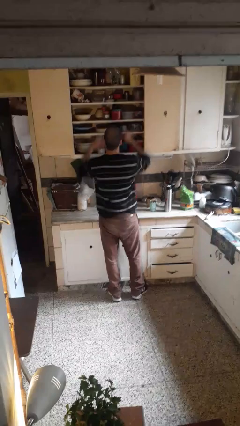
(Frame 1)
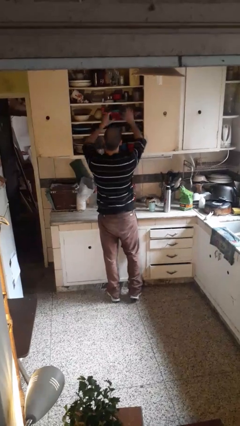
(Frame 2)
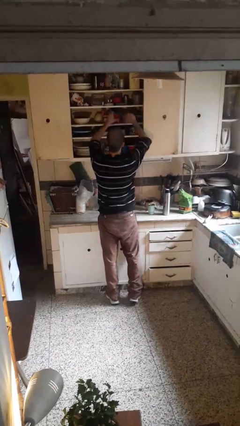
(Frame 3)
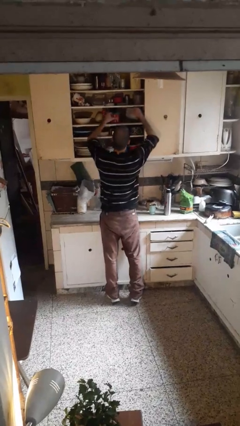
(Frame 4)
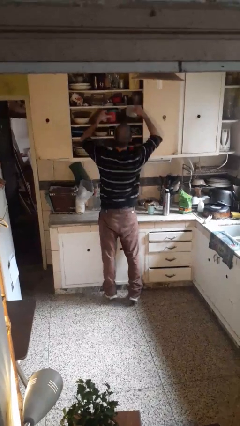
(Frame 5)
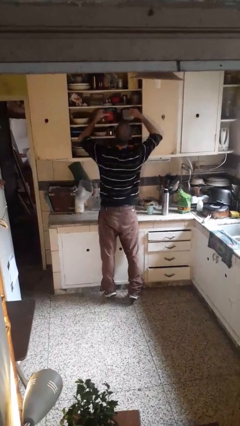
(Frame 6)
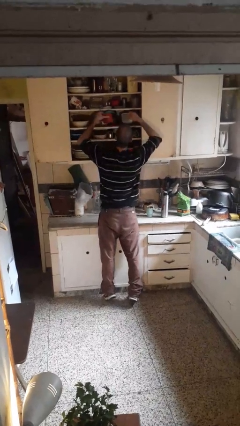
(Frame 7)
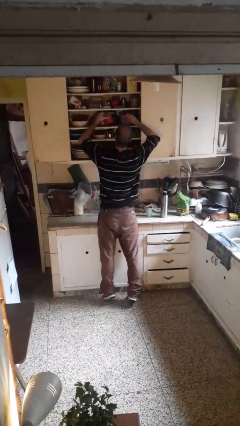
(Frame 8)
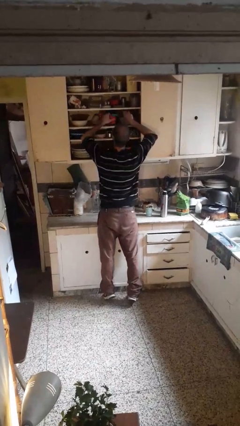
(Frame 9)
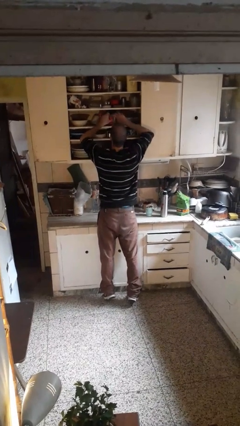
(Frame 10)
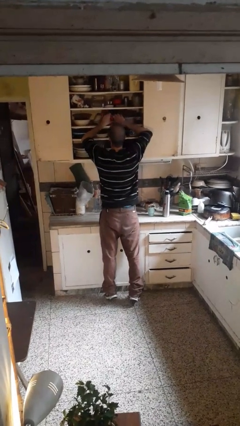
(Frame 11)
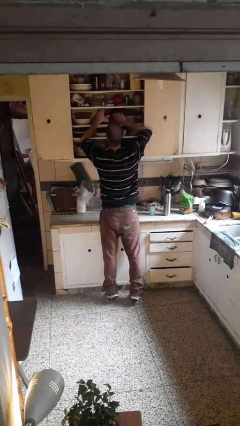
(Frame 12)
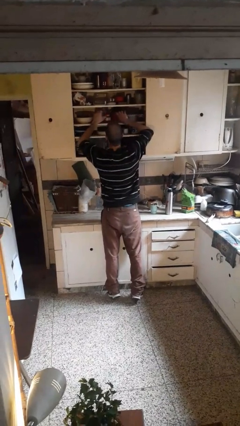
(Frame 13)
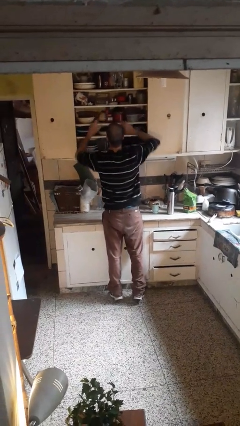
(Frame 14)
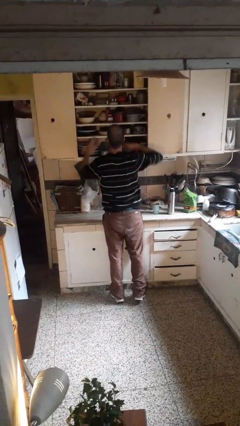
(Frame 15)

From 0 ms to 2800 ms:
person searches in cabinet

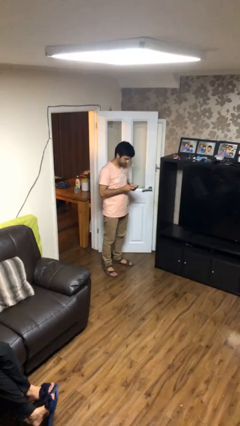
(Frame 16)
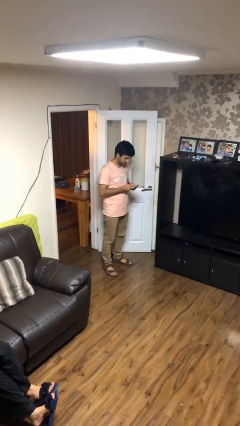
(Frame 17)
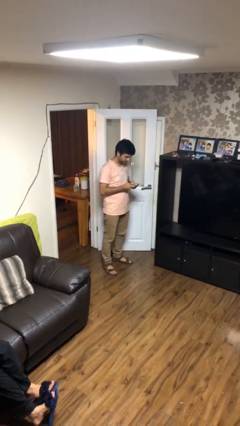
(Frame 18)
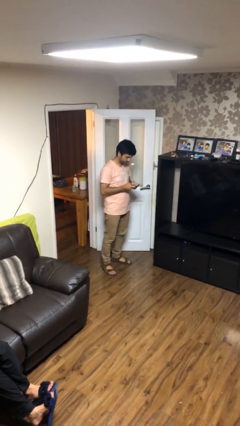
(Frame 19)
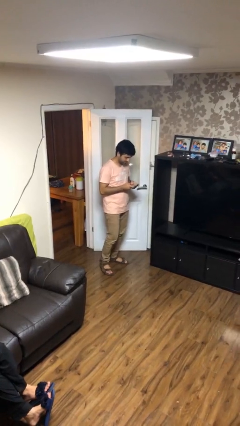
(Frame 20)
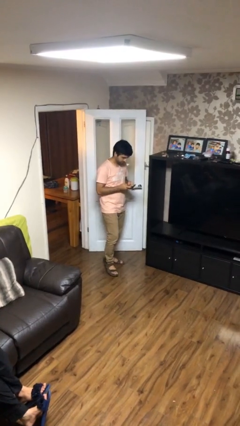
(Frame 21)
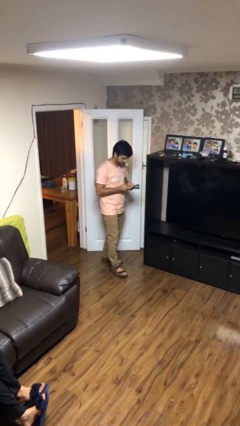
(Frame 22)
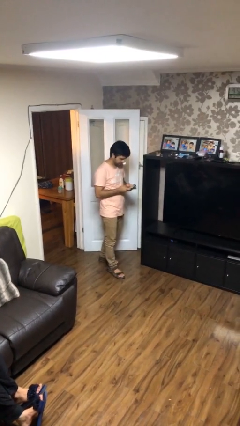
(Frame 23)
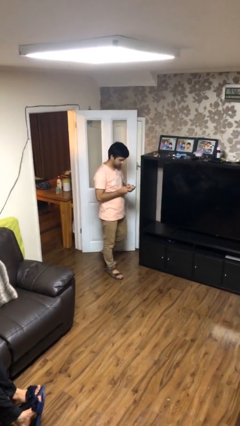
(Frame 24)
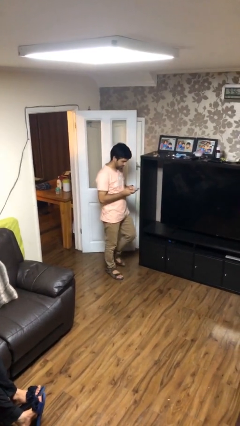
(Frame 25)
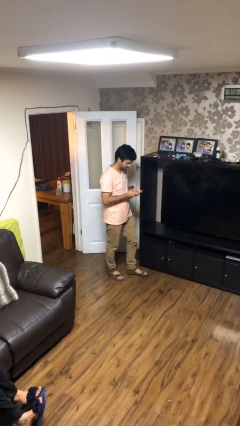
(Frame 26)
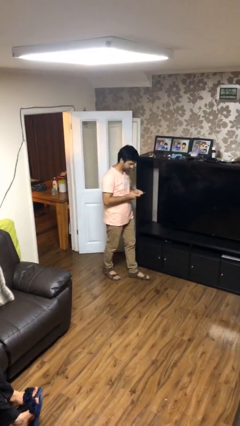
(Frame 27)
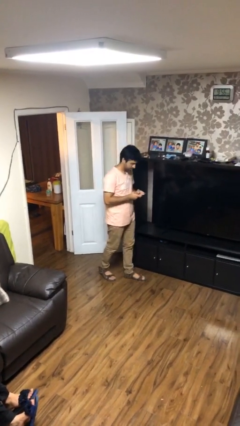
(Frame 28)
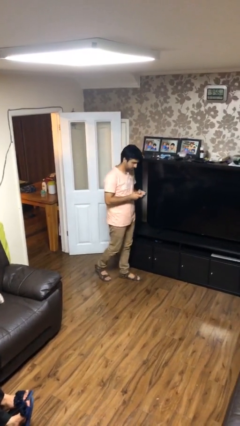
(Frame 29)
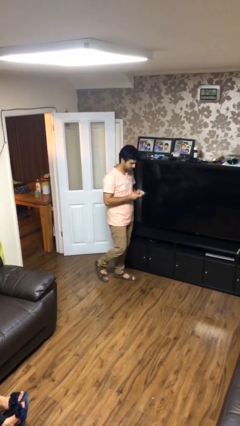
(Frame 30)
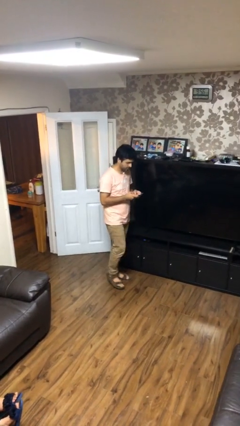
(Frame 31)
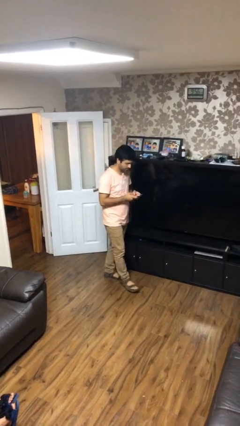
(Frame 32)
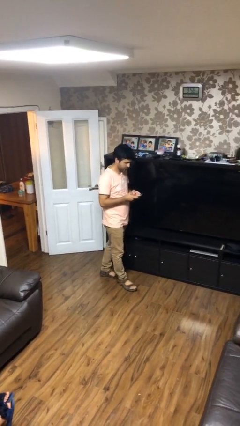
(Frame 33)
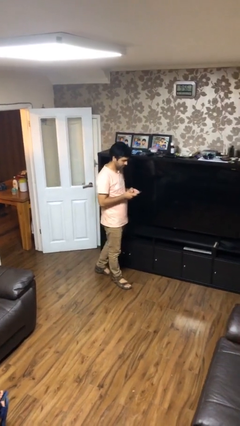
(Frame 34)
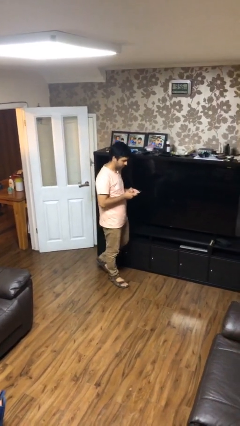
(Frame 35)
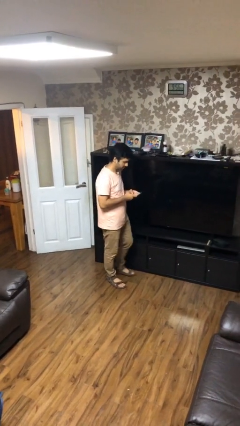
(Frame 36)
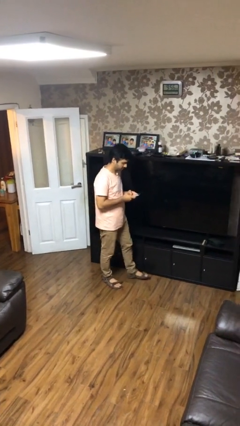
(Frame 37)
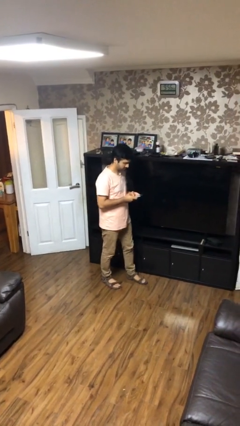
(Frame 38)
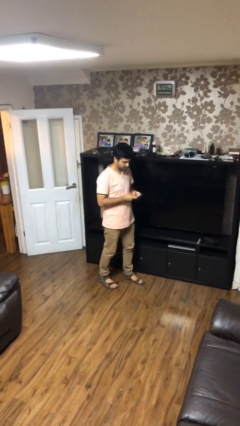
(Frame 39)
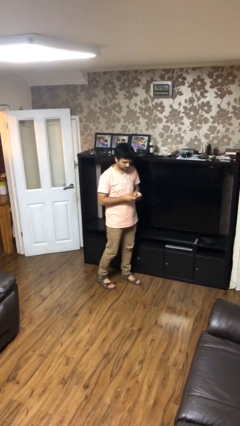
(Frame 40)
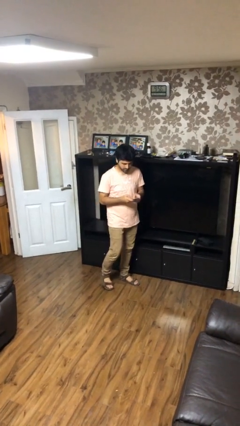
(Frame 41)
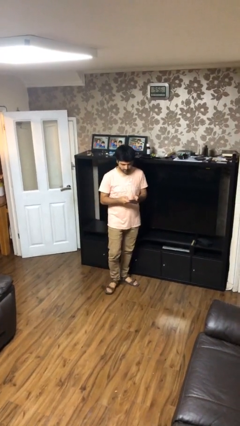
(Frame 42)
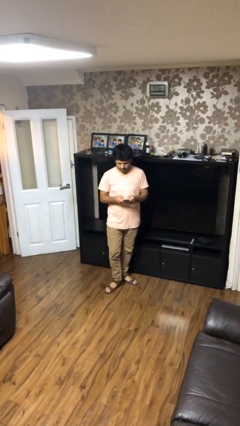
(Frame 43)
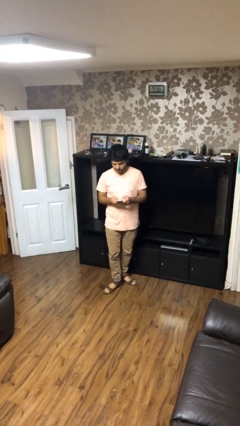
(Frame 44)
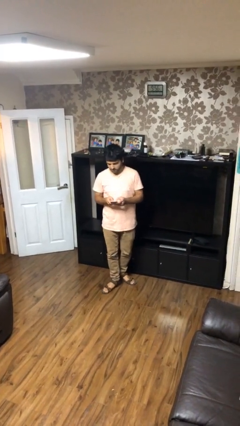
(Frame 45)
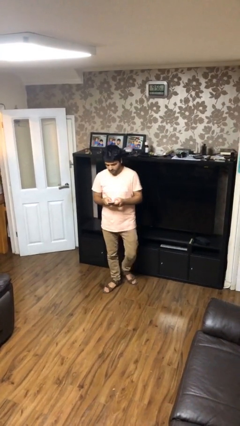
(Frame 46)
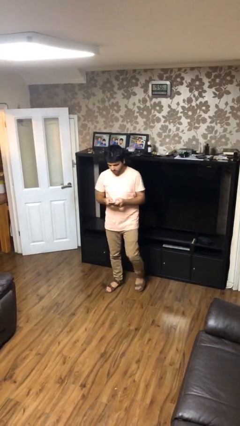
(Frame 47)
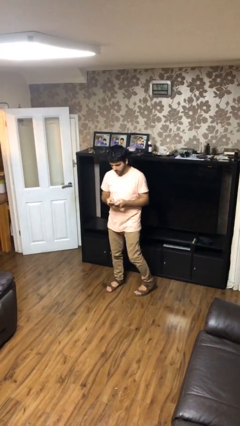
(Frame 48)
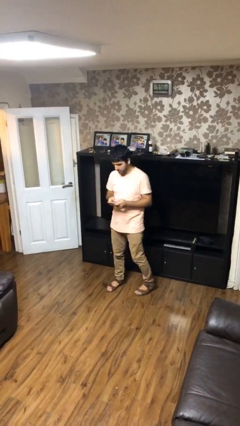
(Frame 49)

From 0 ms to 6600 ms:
person texts on phone

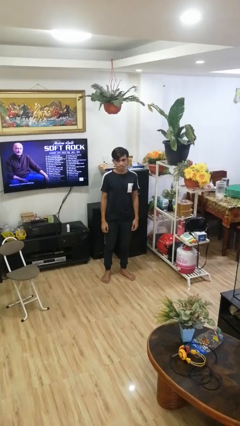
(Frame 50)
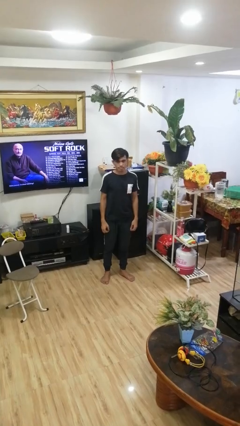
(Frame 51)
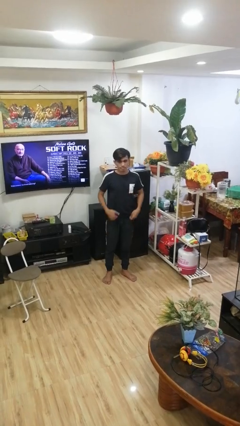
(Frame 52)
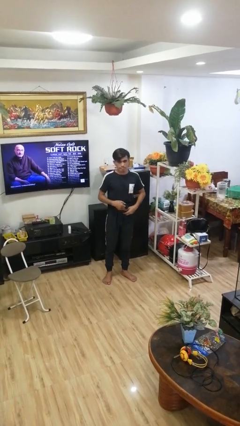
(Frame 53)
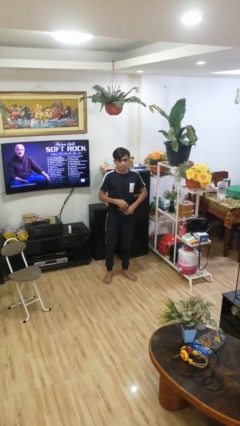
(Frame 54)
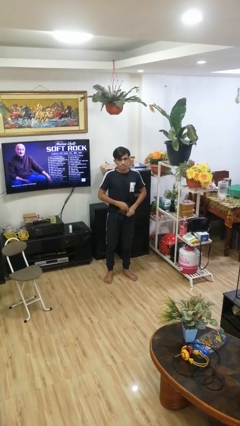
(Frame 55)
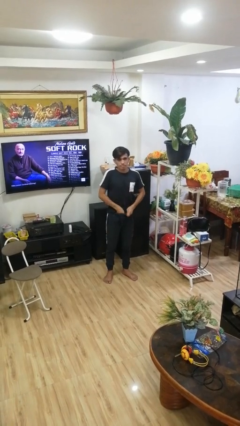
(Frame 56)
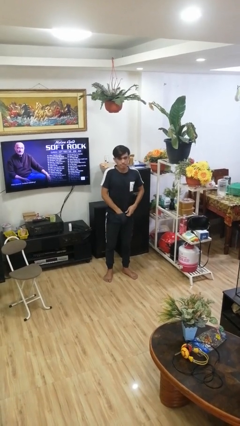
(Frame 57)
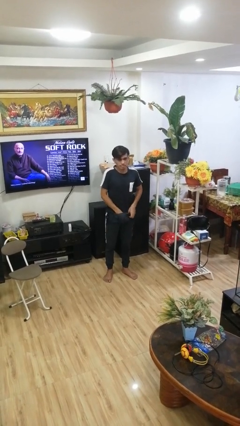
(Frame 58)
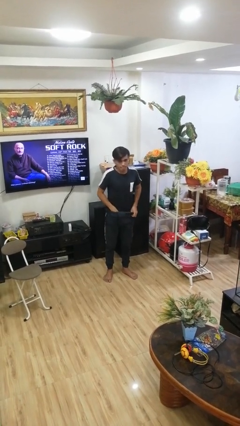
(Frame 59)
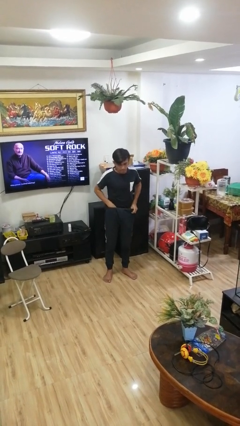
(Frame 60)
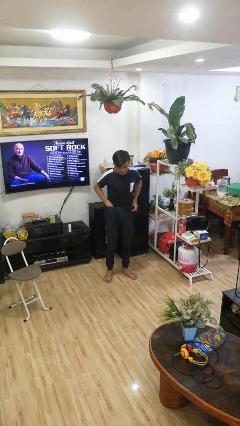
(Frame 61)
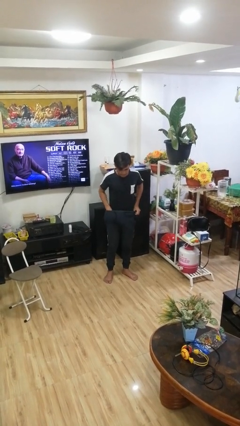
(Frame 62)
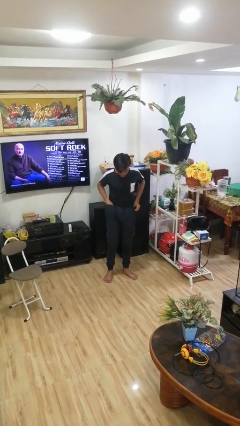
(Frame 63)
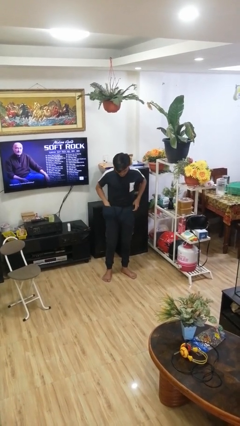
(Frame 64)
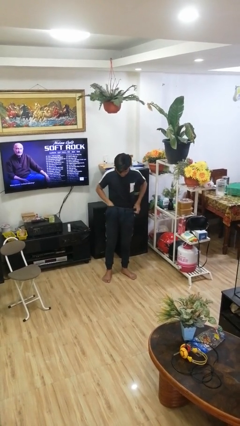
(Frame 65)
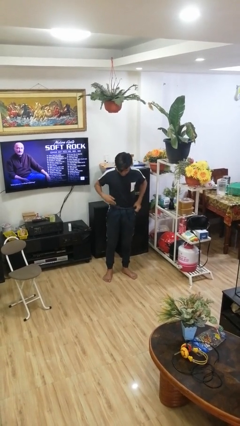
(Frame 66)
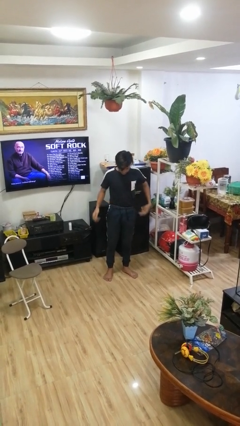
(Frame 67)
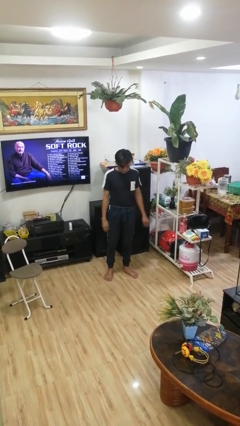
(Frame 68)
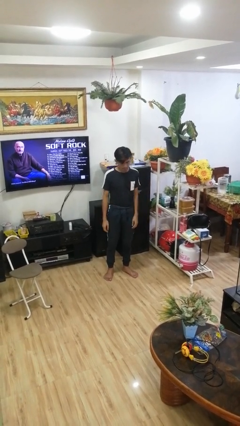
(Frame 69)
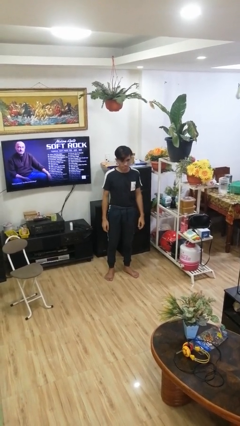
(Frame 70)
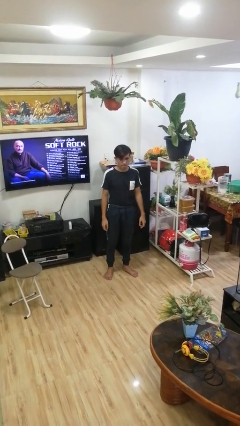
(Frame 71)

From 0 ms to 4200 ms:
person tucks in shirt

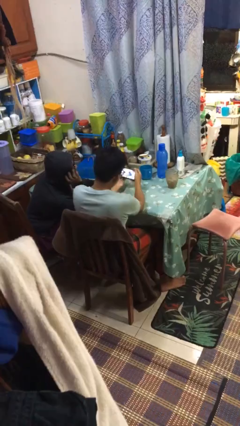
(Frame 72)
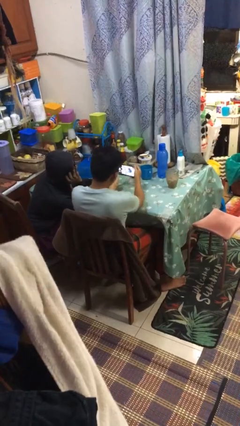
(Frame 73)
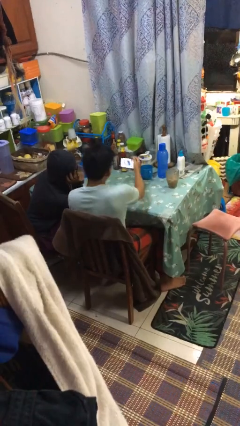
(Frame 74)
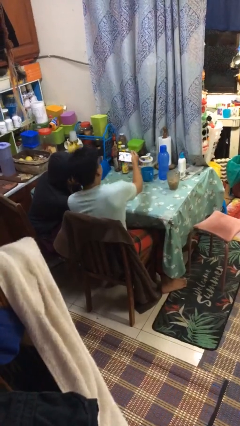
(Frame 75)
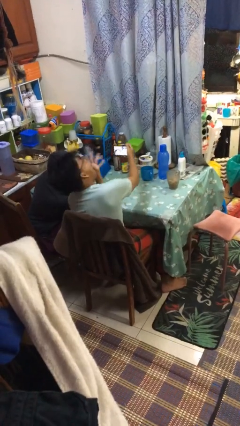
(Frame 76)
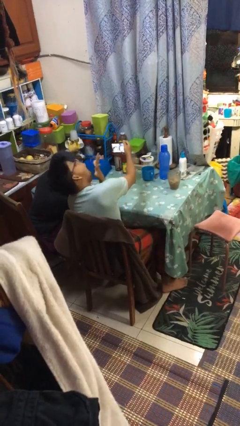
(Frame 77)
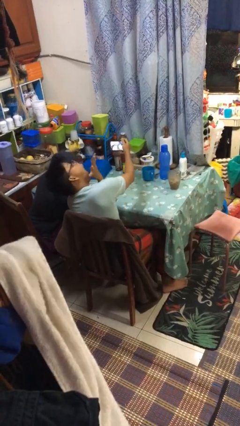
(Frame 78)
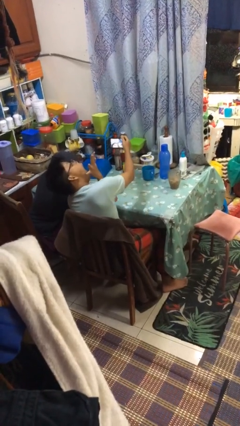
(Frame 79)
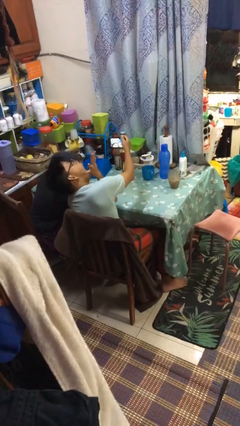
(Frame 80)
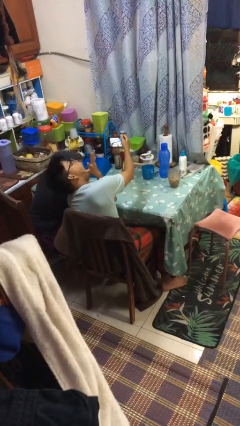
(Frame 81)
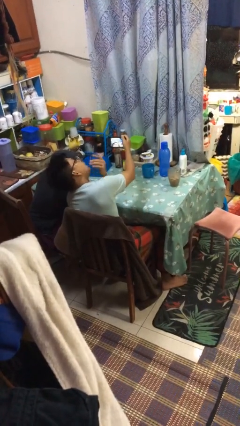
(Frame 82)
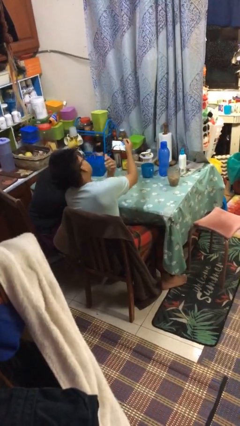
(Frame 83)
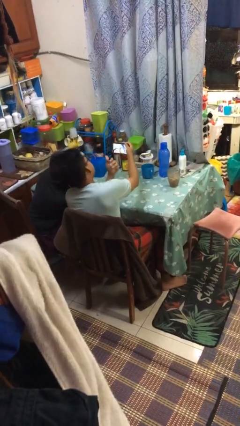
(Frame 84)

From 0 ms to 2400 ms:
person takes selfie with person

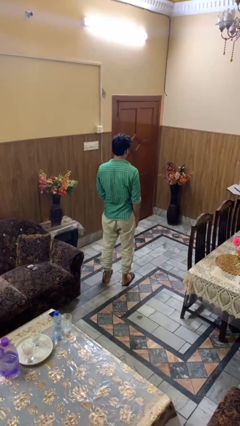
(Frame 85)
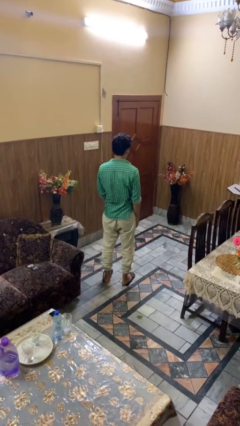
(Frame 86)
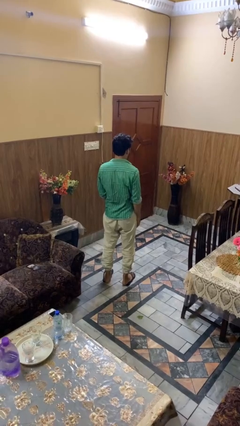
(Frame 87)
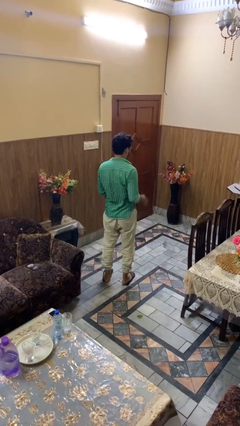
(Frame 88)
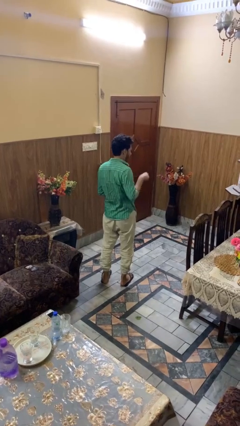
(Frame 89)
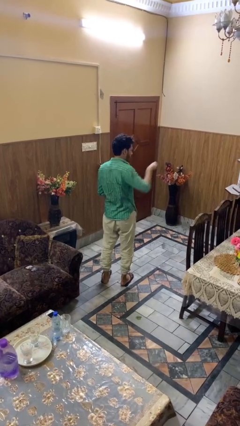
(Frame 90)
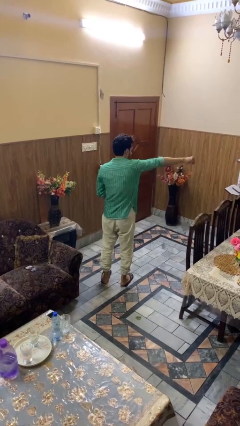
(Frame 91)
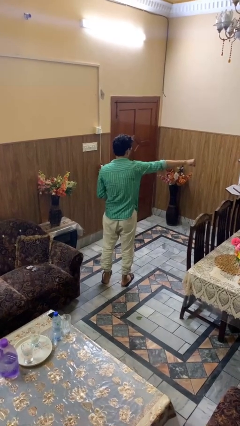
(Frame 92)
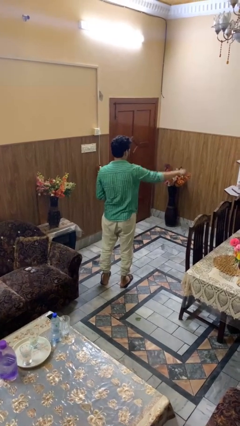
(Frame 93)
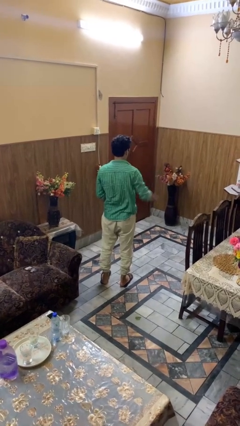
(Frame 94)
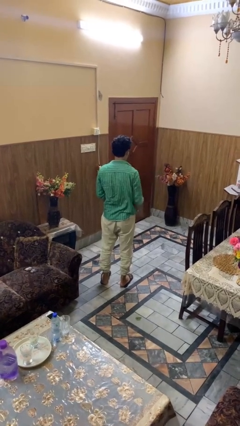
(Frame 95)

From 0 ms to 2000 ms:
person punches
